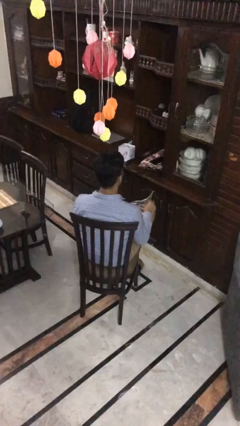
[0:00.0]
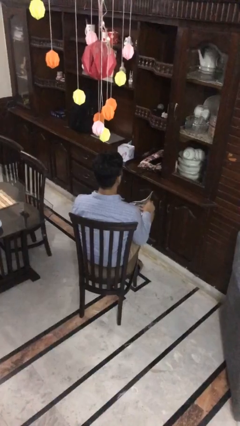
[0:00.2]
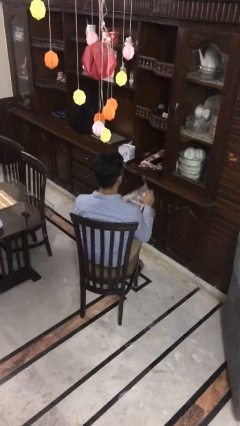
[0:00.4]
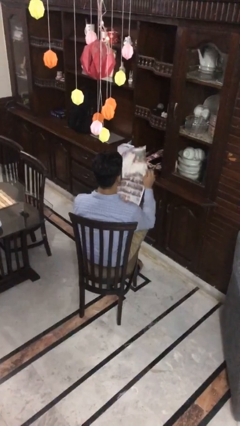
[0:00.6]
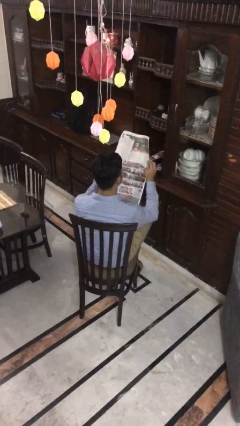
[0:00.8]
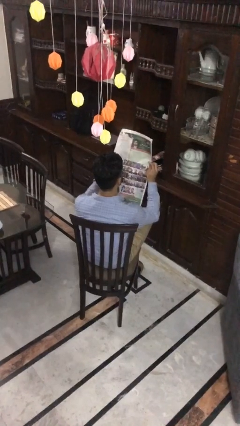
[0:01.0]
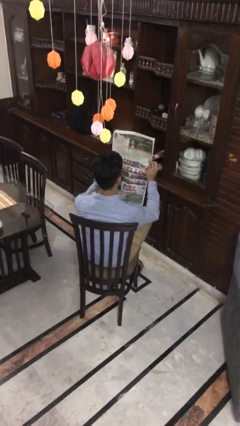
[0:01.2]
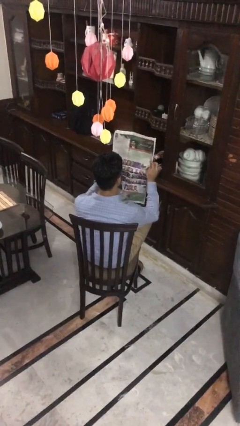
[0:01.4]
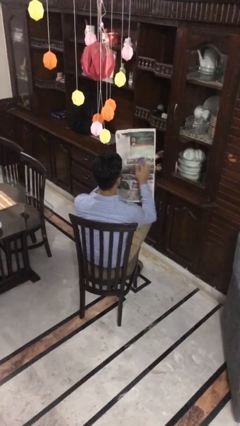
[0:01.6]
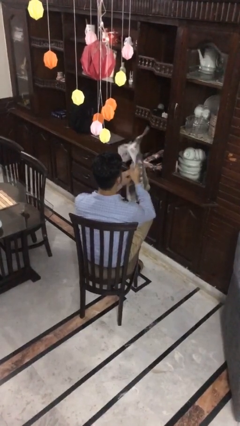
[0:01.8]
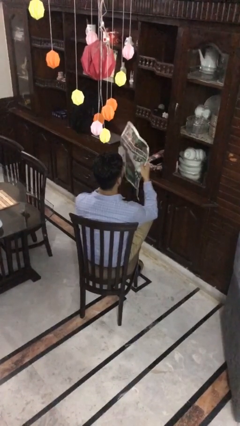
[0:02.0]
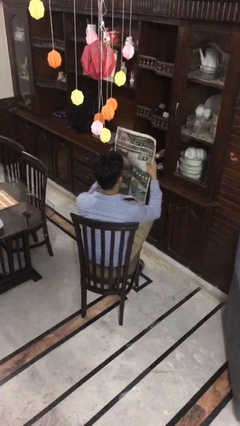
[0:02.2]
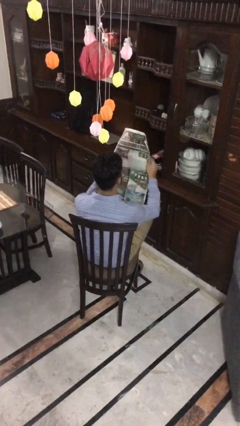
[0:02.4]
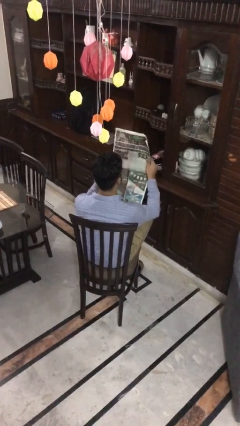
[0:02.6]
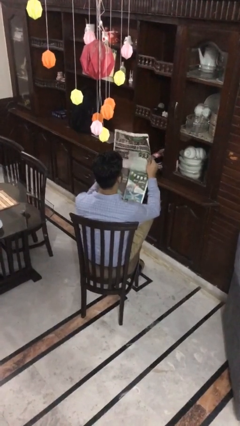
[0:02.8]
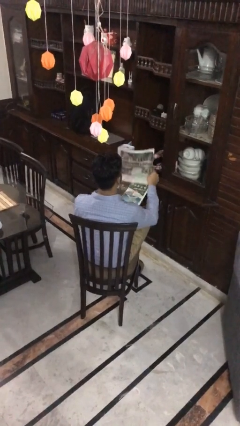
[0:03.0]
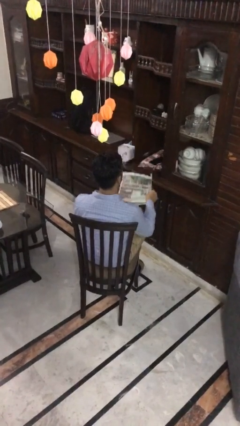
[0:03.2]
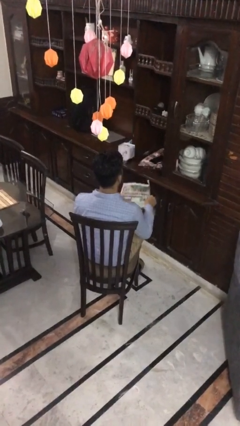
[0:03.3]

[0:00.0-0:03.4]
person reads newspaper

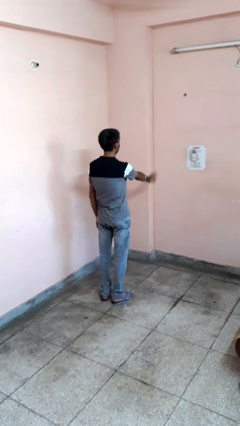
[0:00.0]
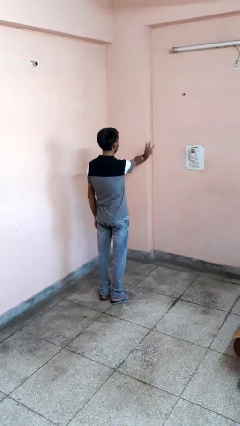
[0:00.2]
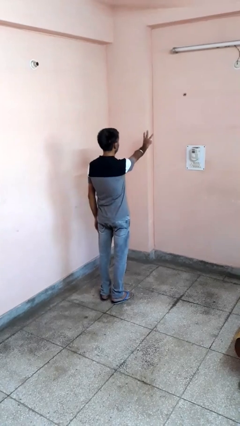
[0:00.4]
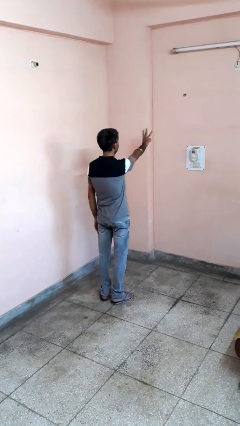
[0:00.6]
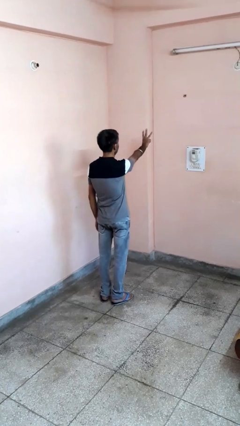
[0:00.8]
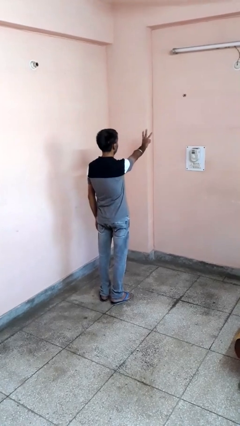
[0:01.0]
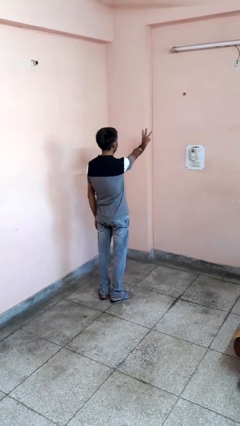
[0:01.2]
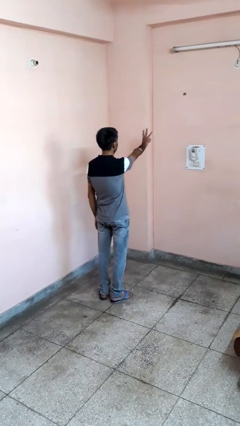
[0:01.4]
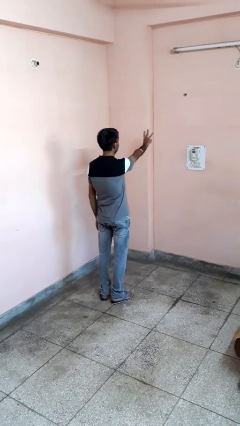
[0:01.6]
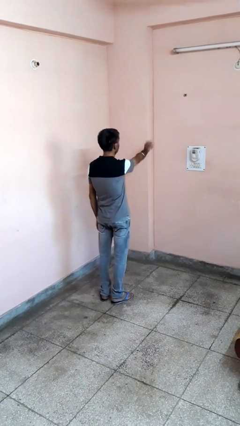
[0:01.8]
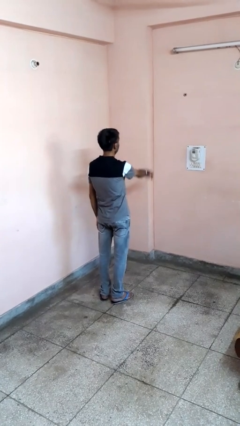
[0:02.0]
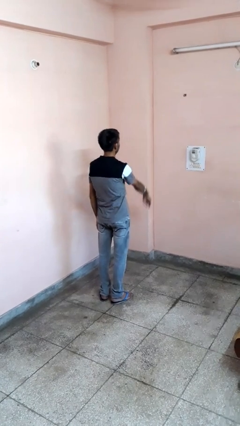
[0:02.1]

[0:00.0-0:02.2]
person gestures number three

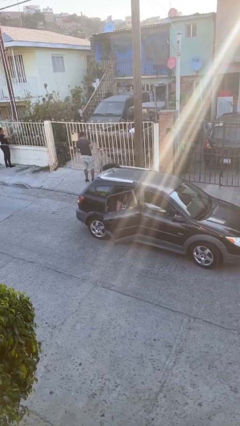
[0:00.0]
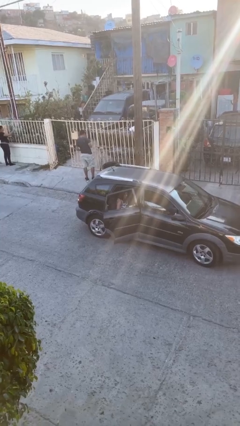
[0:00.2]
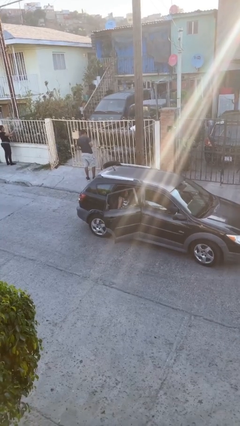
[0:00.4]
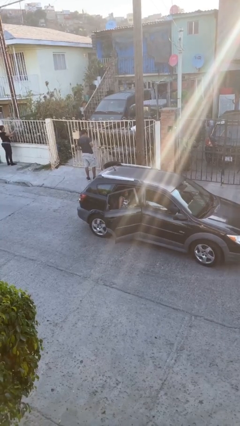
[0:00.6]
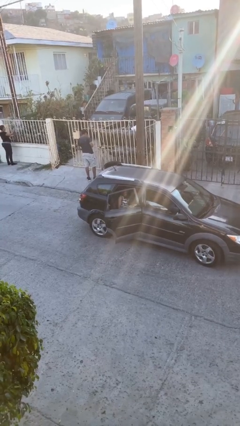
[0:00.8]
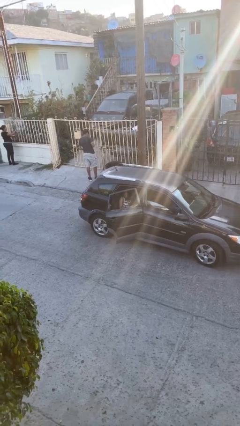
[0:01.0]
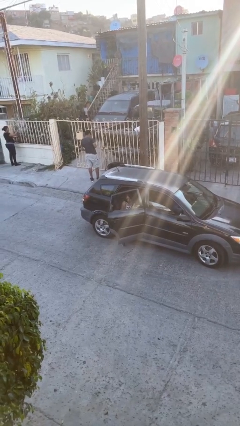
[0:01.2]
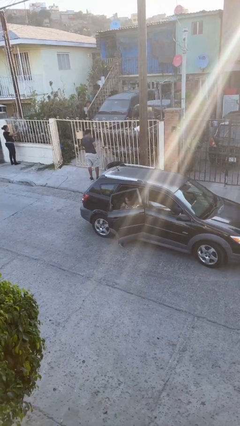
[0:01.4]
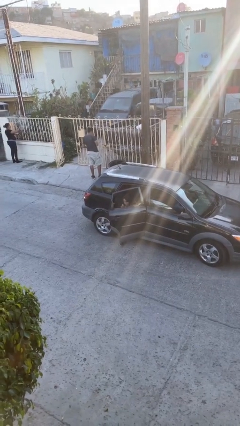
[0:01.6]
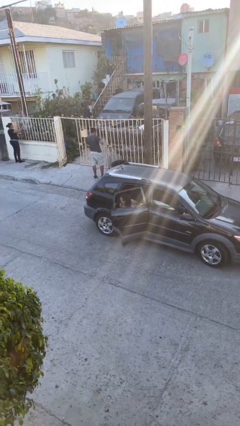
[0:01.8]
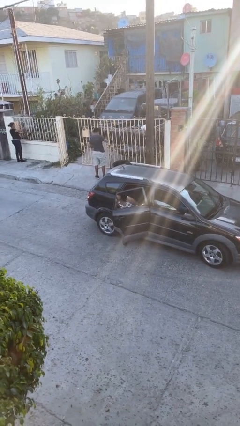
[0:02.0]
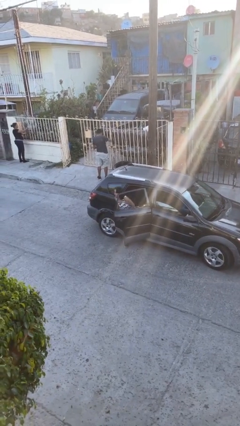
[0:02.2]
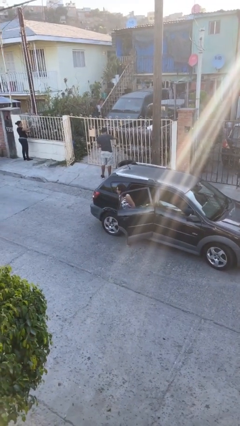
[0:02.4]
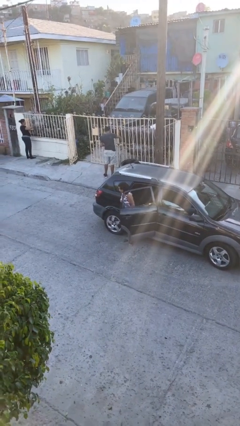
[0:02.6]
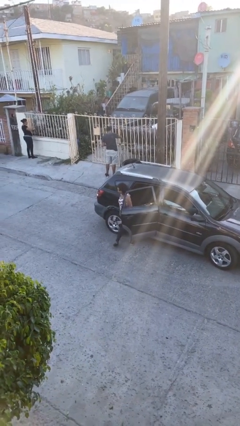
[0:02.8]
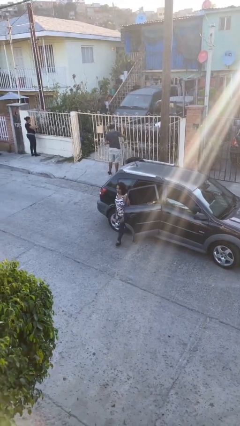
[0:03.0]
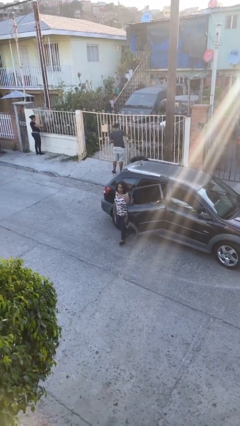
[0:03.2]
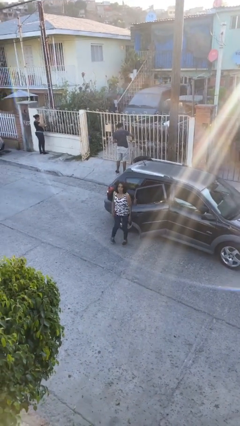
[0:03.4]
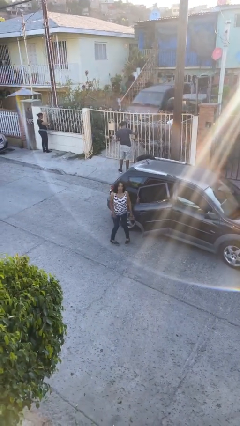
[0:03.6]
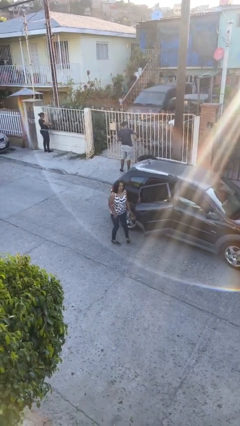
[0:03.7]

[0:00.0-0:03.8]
person exits car

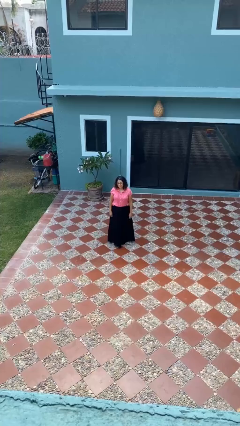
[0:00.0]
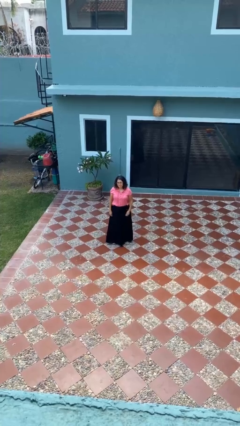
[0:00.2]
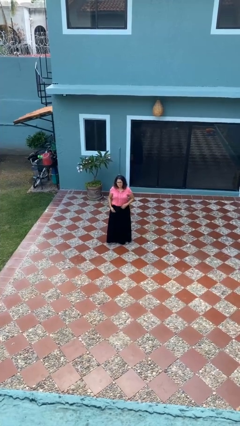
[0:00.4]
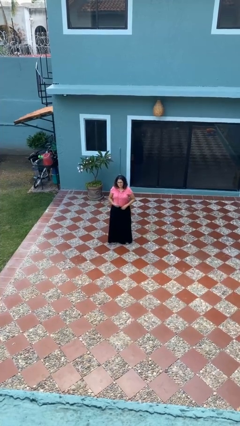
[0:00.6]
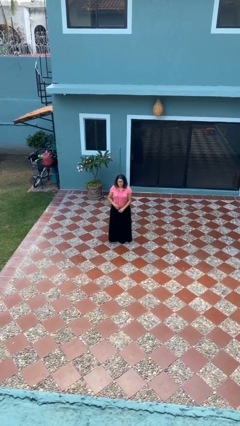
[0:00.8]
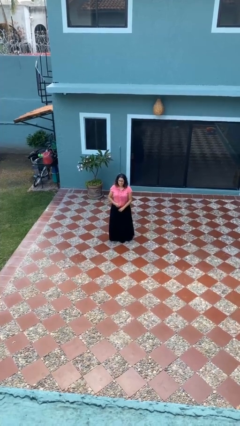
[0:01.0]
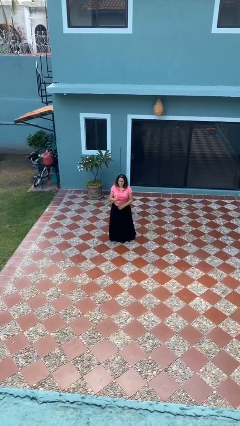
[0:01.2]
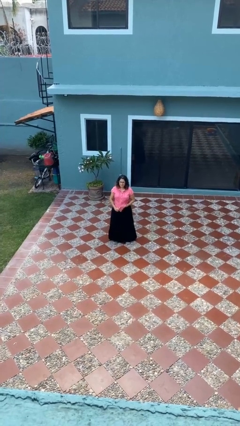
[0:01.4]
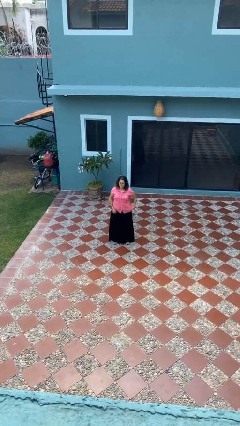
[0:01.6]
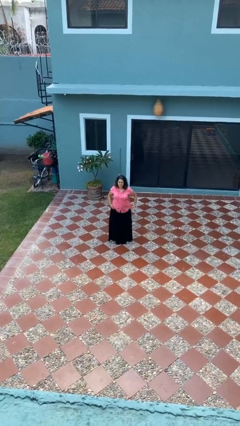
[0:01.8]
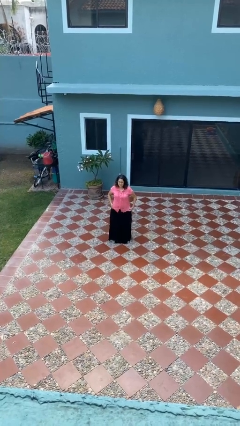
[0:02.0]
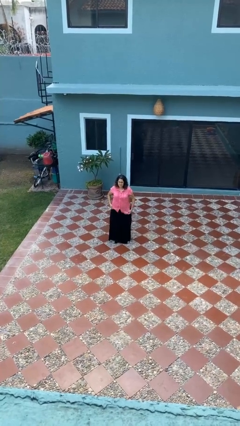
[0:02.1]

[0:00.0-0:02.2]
person untucks shirt

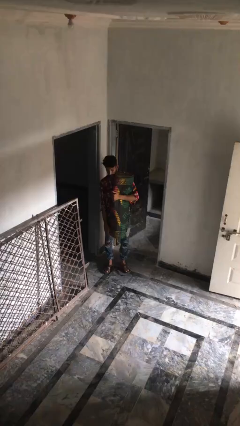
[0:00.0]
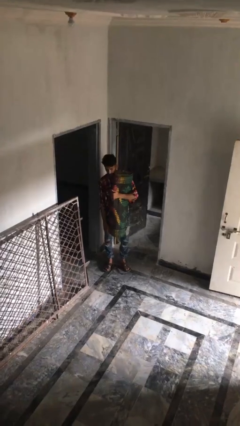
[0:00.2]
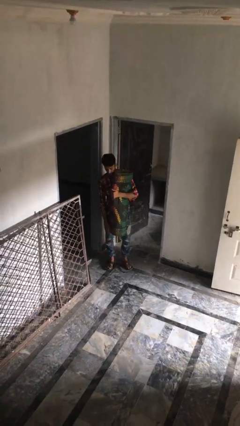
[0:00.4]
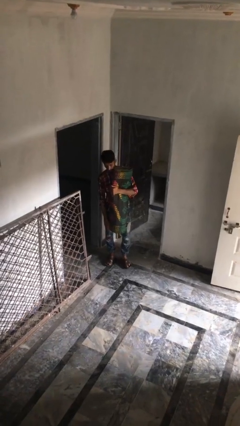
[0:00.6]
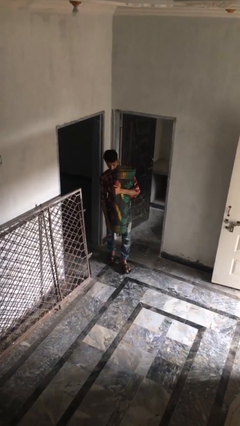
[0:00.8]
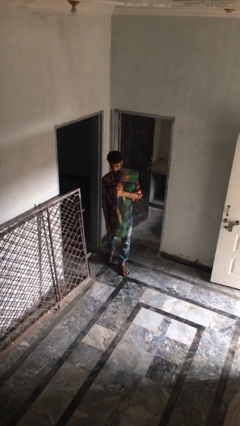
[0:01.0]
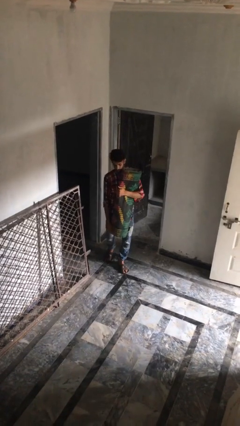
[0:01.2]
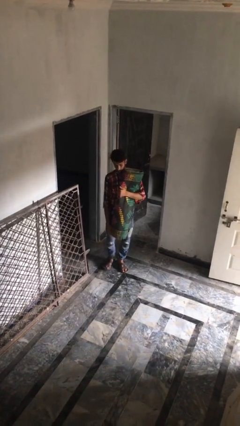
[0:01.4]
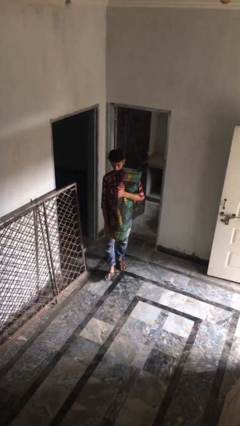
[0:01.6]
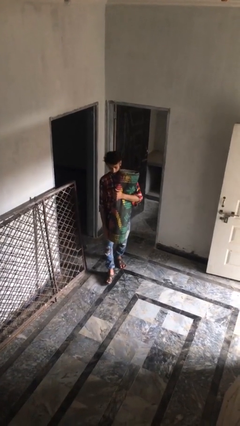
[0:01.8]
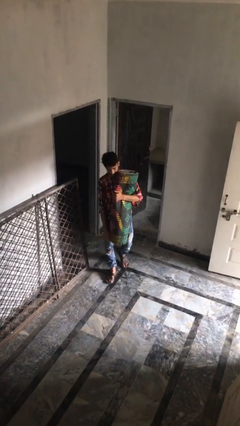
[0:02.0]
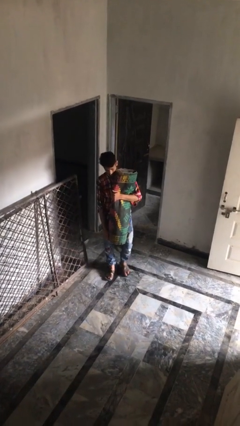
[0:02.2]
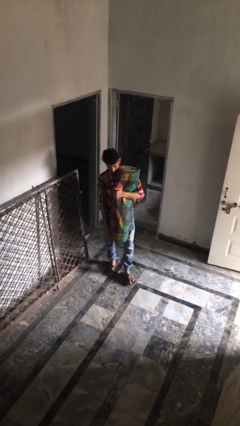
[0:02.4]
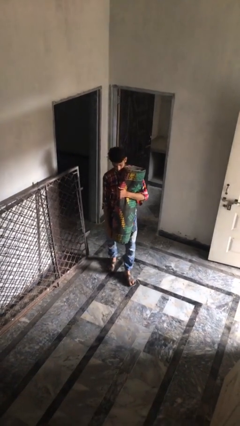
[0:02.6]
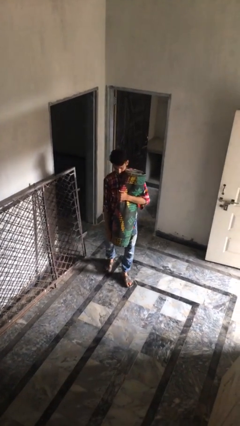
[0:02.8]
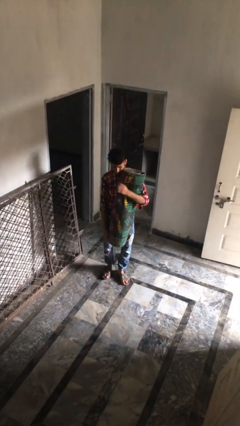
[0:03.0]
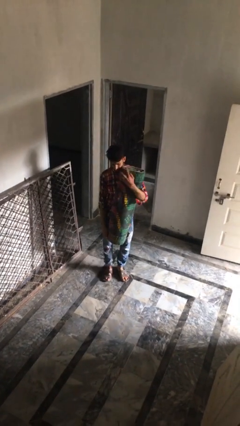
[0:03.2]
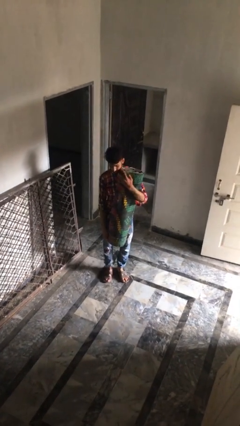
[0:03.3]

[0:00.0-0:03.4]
person carries heavy object

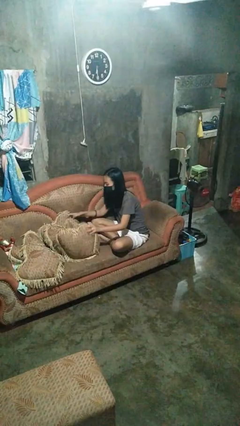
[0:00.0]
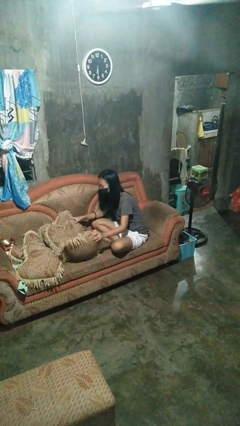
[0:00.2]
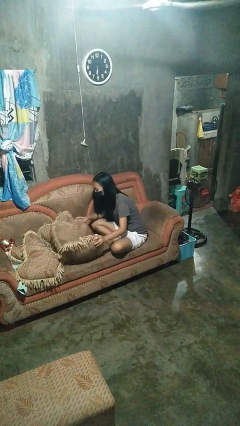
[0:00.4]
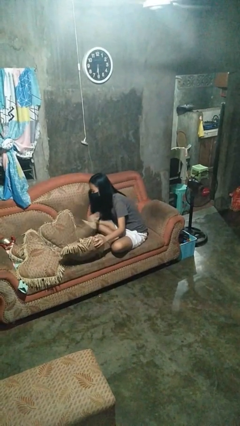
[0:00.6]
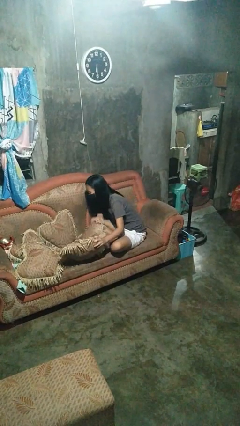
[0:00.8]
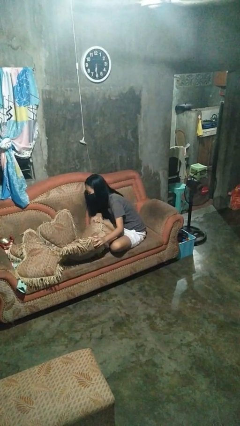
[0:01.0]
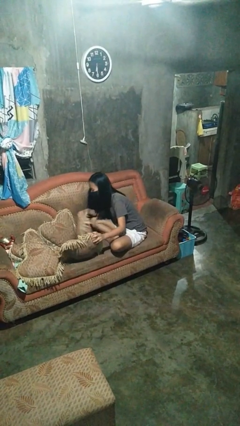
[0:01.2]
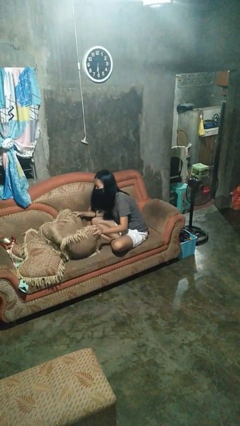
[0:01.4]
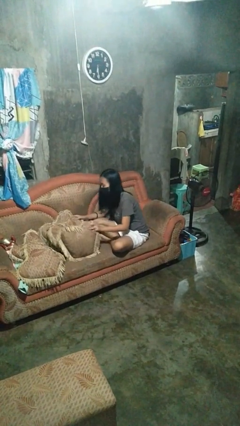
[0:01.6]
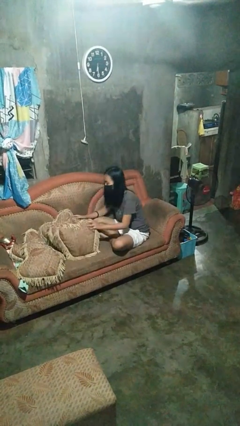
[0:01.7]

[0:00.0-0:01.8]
person searches in couch

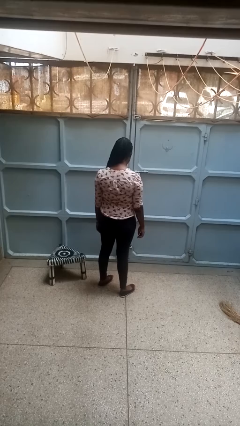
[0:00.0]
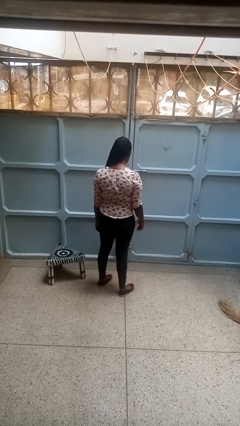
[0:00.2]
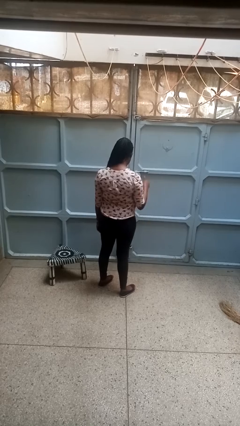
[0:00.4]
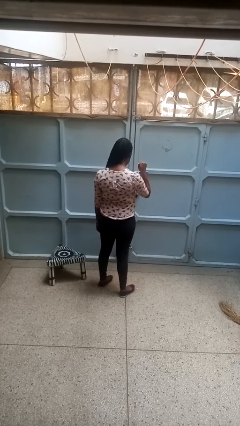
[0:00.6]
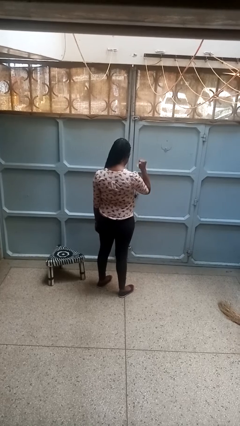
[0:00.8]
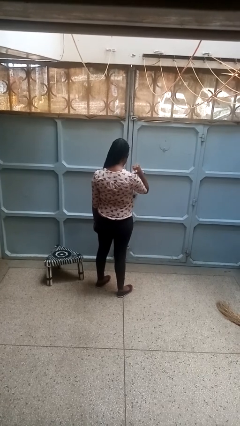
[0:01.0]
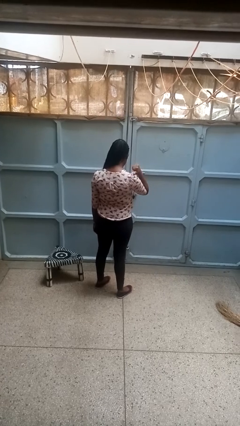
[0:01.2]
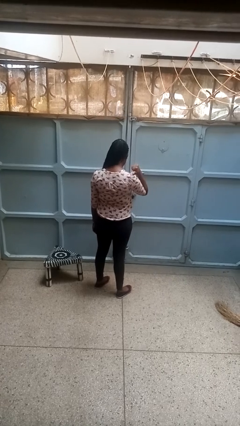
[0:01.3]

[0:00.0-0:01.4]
person gestures behind me
